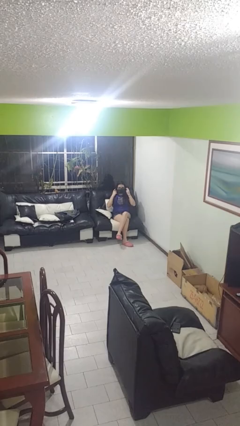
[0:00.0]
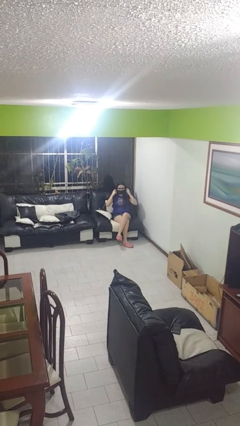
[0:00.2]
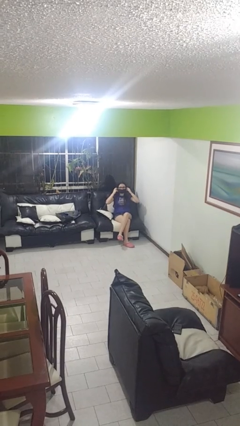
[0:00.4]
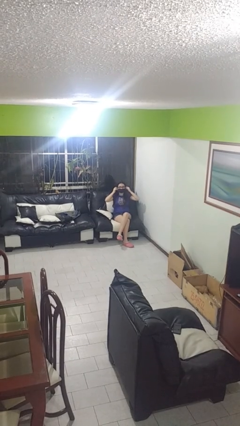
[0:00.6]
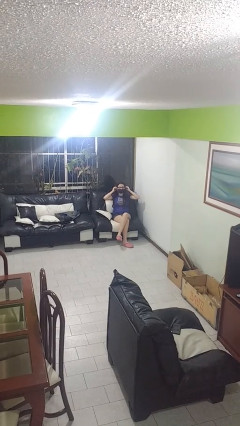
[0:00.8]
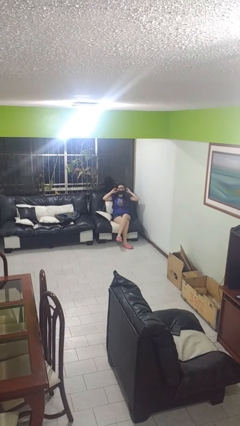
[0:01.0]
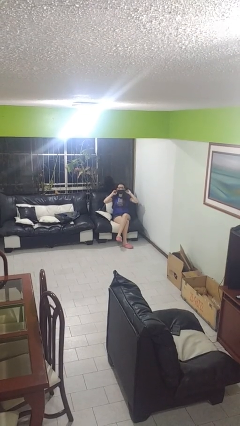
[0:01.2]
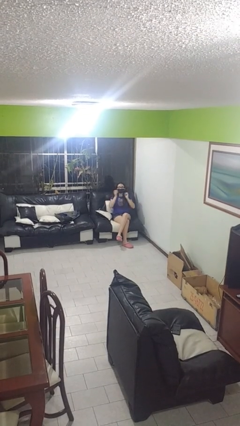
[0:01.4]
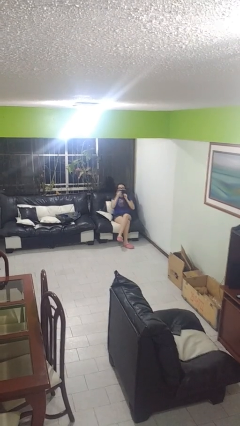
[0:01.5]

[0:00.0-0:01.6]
person puts on facemask

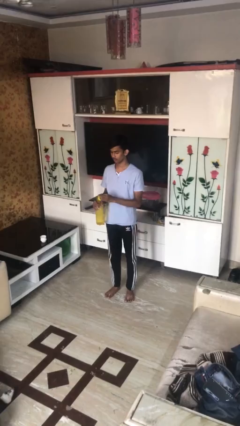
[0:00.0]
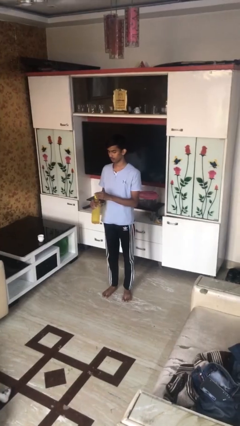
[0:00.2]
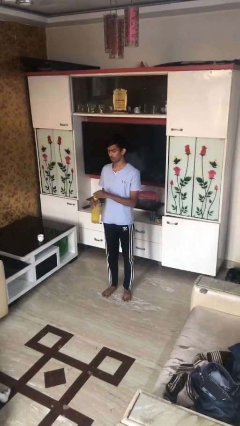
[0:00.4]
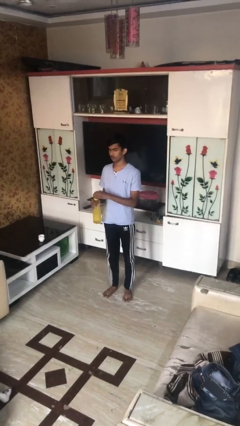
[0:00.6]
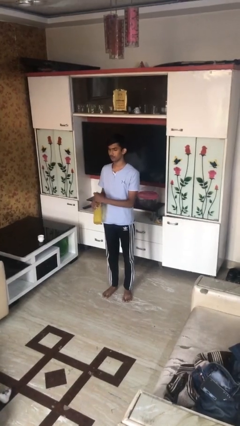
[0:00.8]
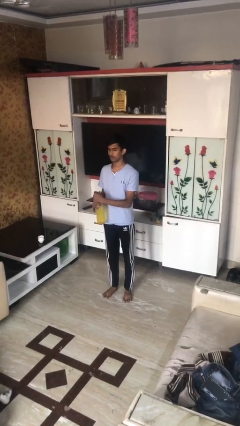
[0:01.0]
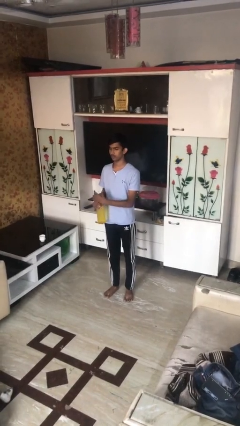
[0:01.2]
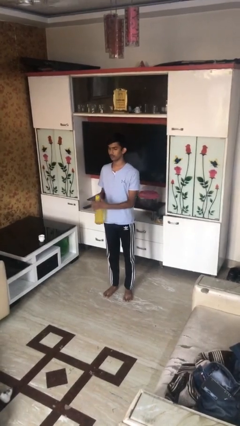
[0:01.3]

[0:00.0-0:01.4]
person screws lid to bottle

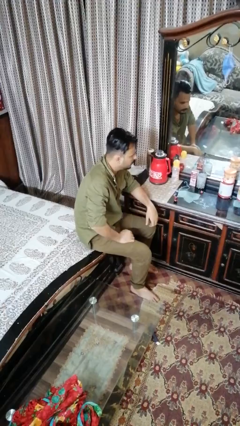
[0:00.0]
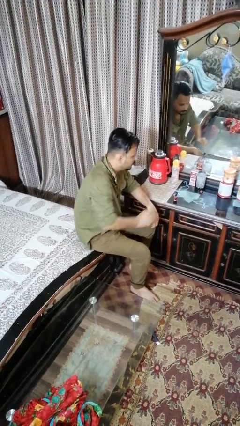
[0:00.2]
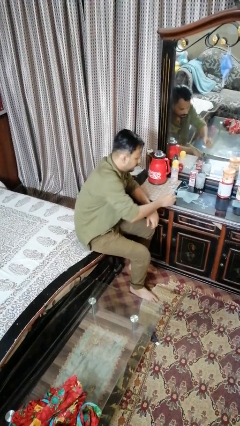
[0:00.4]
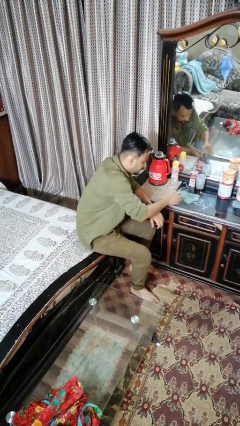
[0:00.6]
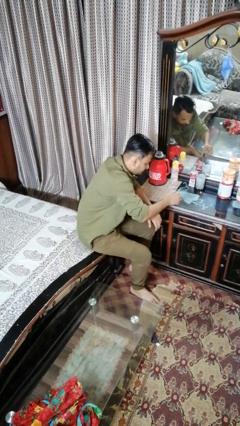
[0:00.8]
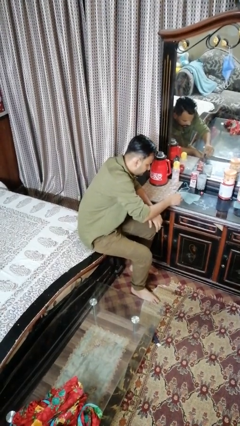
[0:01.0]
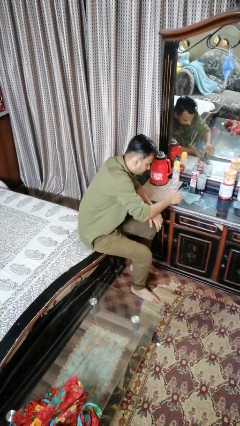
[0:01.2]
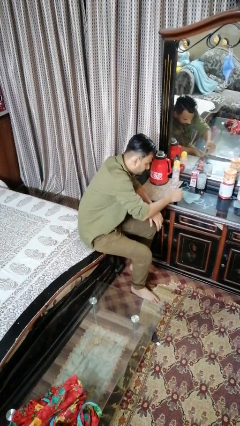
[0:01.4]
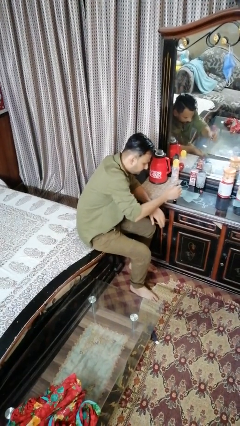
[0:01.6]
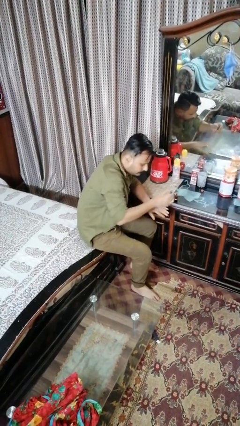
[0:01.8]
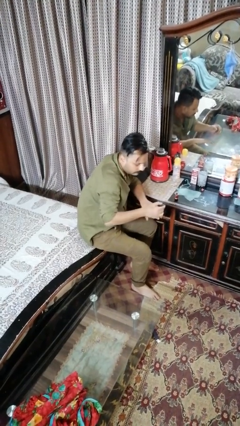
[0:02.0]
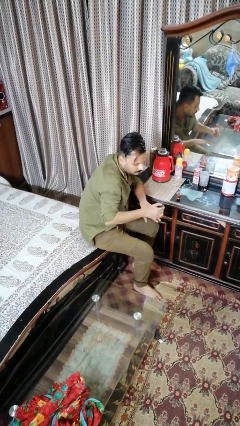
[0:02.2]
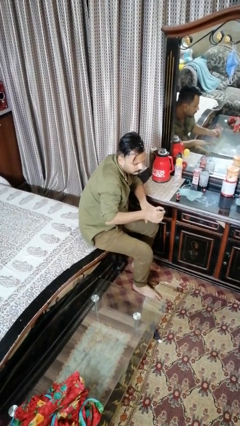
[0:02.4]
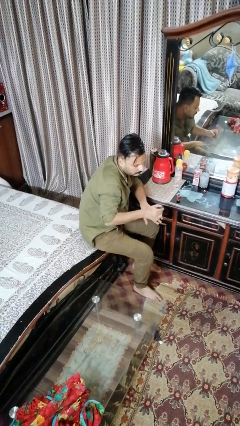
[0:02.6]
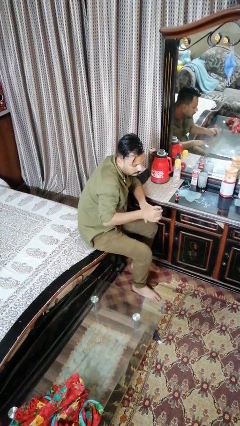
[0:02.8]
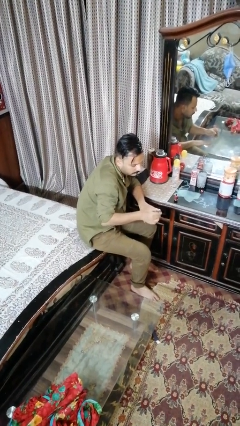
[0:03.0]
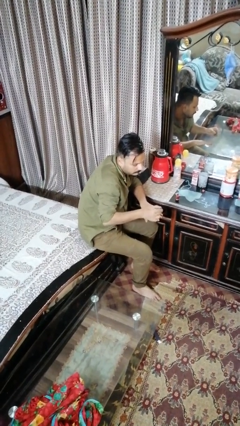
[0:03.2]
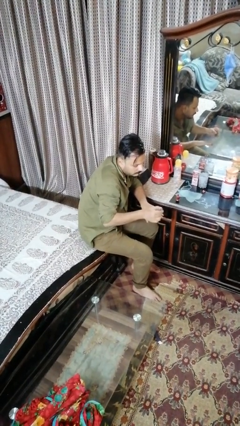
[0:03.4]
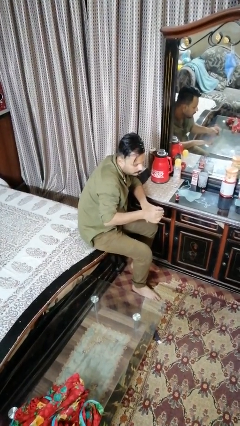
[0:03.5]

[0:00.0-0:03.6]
person paints fingernails

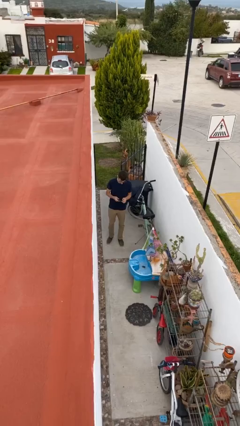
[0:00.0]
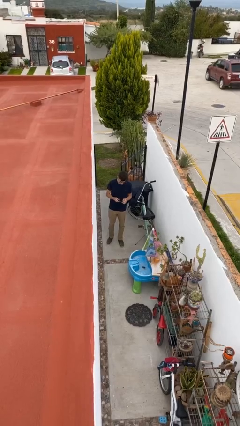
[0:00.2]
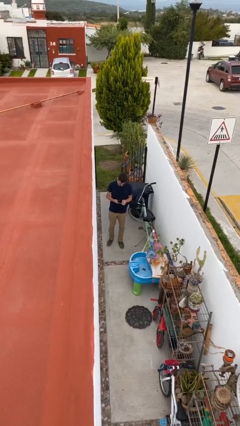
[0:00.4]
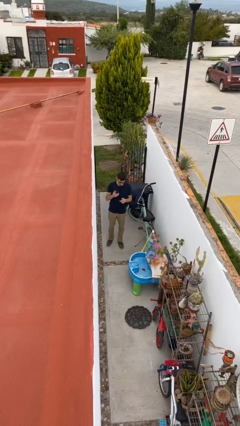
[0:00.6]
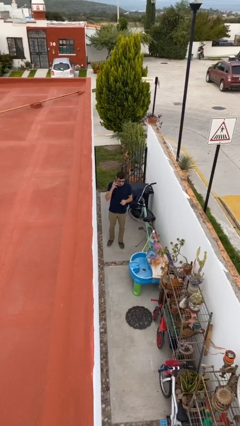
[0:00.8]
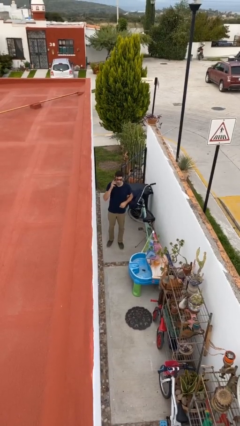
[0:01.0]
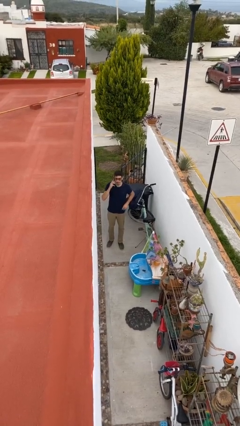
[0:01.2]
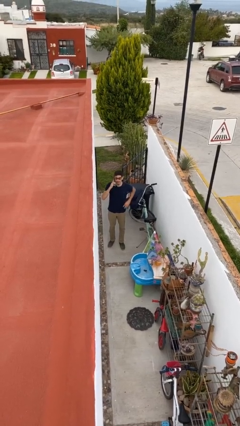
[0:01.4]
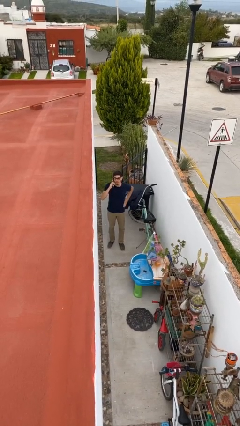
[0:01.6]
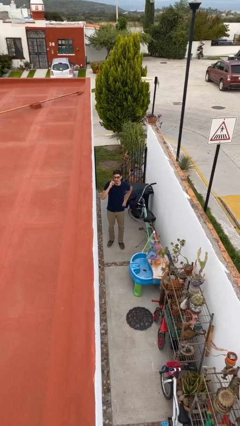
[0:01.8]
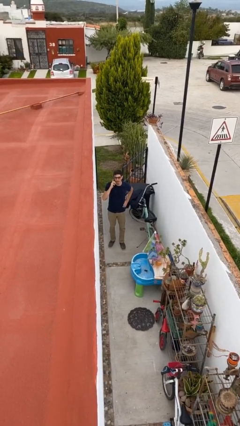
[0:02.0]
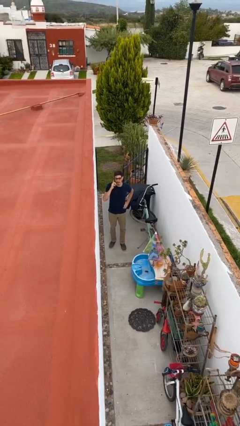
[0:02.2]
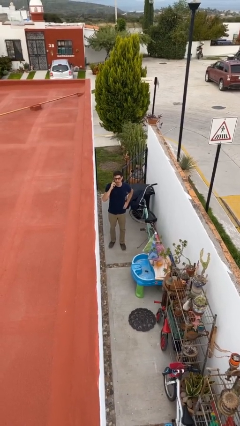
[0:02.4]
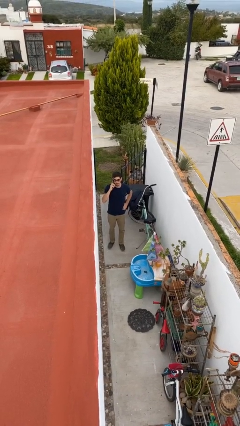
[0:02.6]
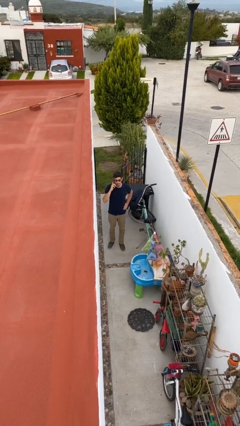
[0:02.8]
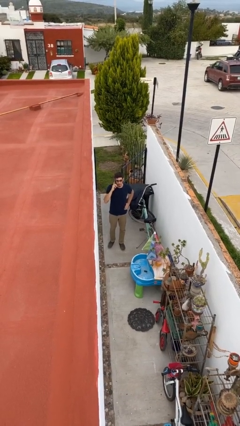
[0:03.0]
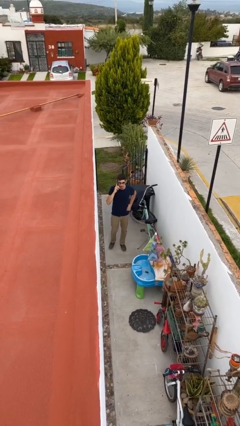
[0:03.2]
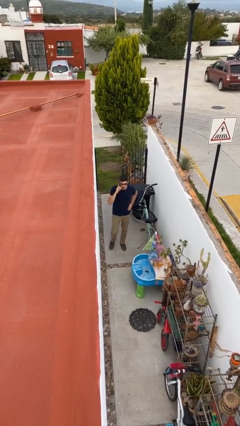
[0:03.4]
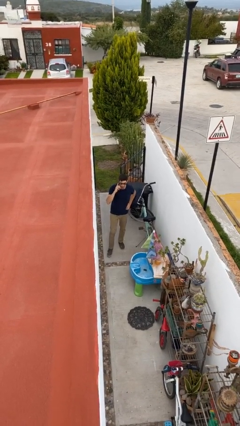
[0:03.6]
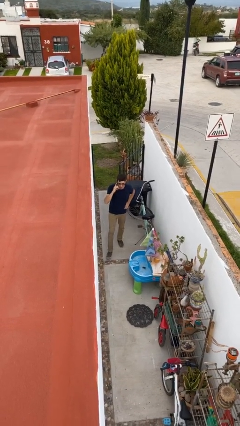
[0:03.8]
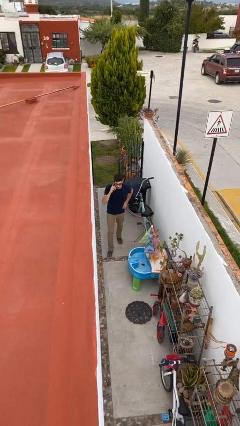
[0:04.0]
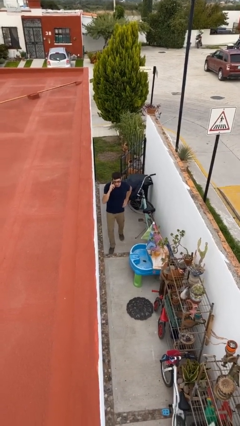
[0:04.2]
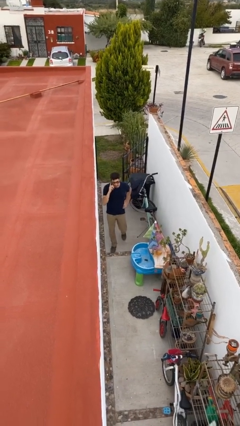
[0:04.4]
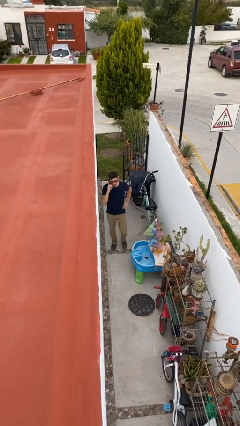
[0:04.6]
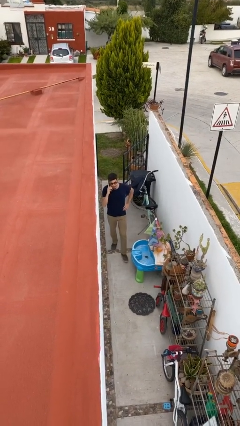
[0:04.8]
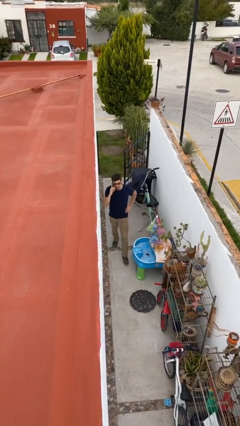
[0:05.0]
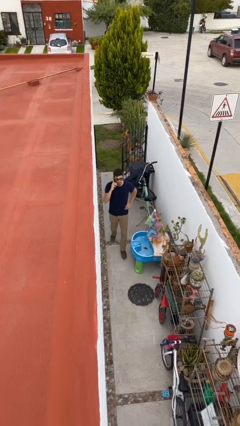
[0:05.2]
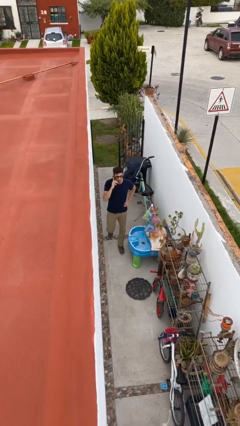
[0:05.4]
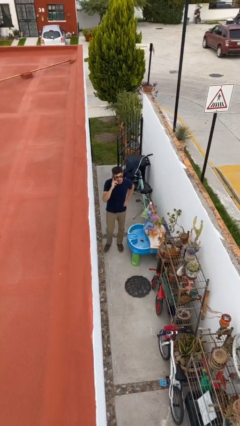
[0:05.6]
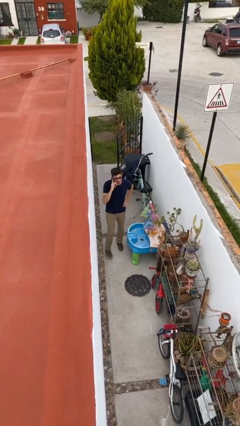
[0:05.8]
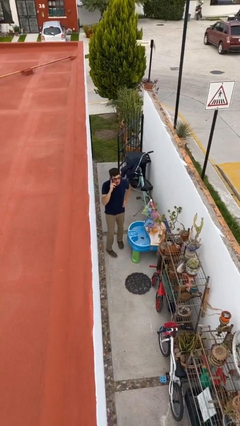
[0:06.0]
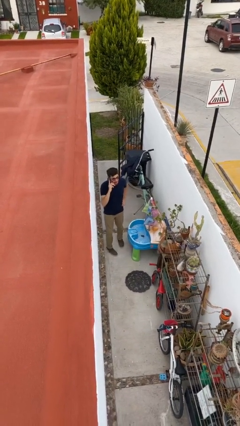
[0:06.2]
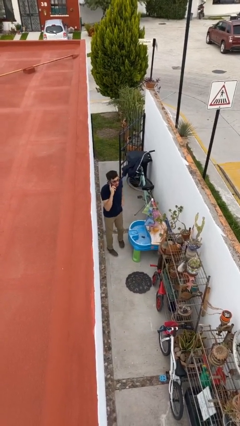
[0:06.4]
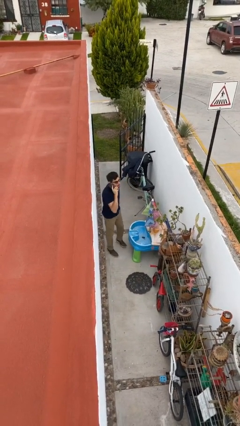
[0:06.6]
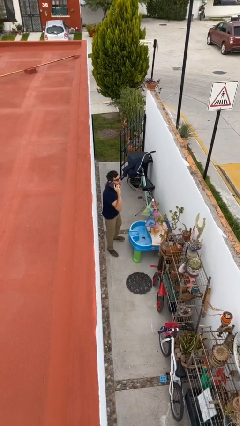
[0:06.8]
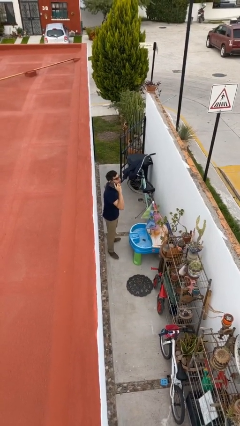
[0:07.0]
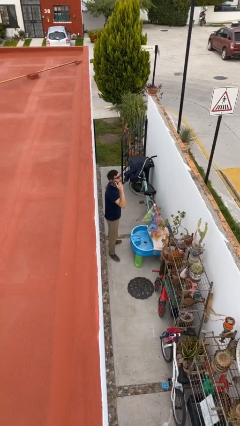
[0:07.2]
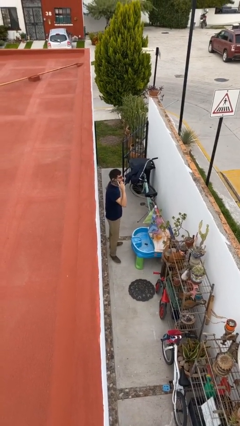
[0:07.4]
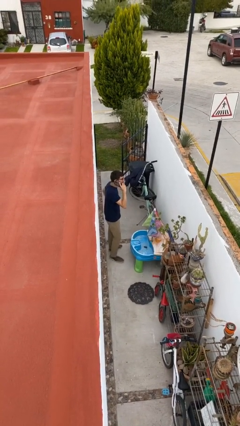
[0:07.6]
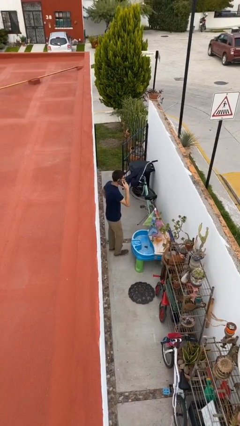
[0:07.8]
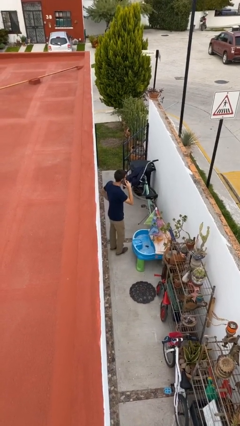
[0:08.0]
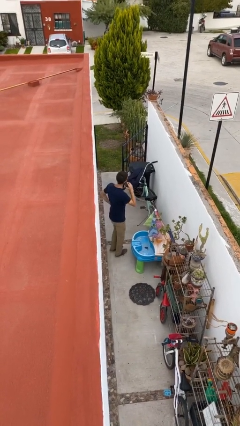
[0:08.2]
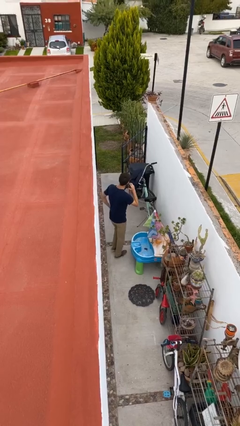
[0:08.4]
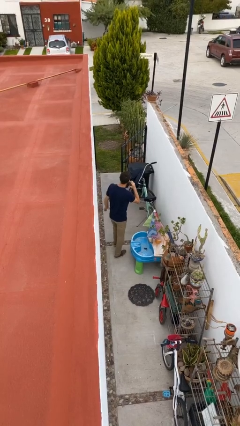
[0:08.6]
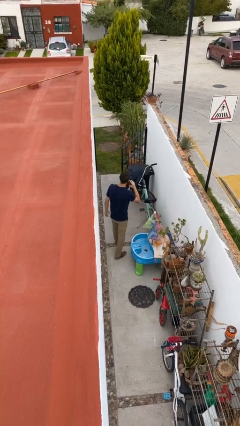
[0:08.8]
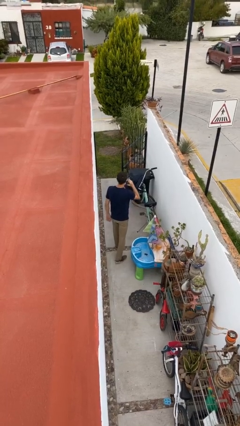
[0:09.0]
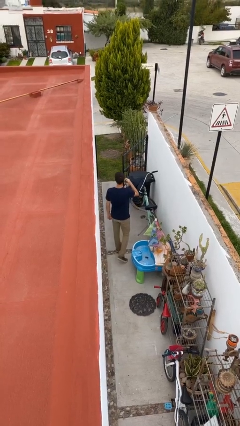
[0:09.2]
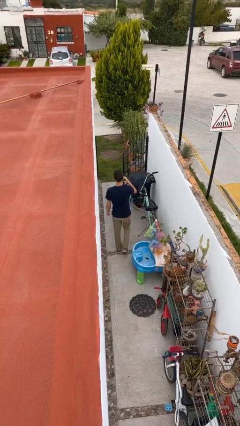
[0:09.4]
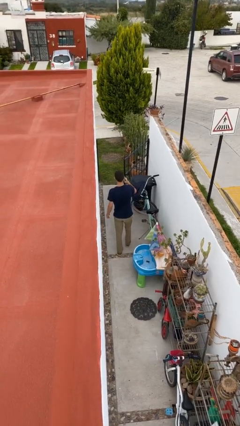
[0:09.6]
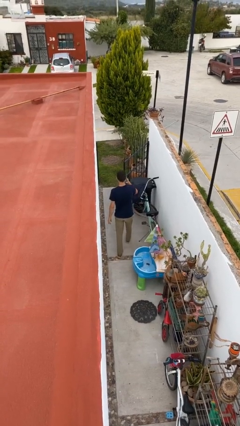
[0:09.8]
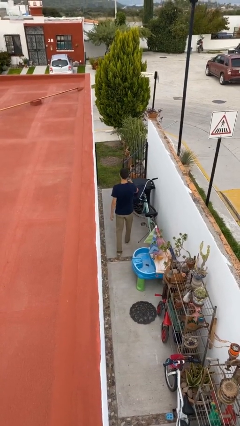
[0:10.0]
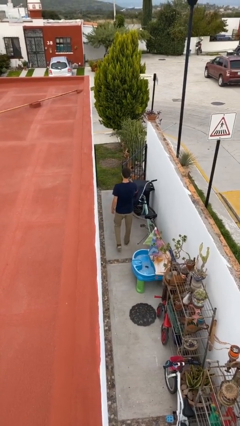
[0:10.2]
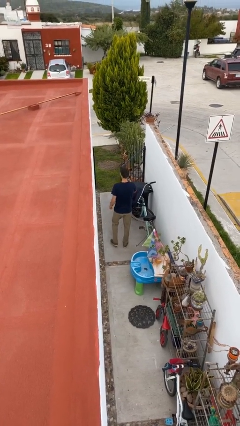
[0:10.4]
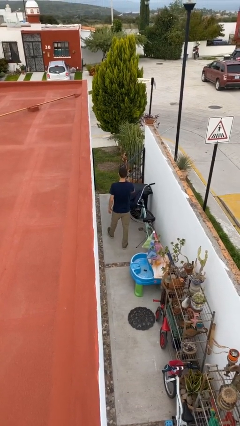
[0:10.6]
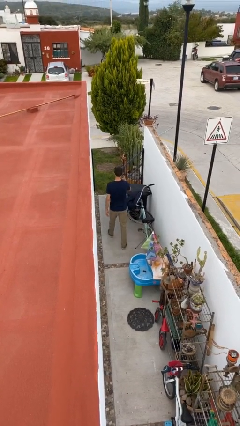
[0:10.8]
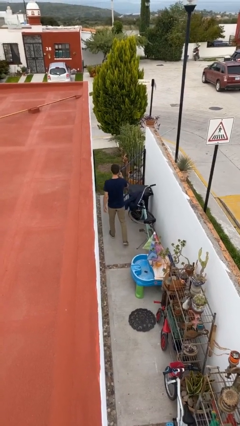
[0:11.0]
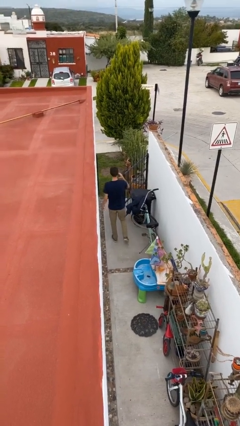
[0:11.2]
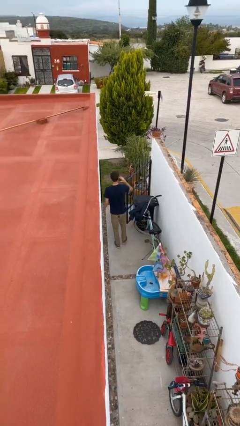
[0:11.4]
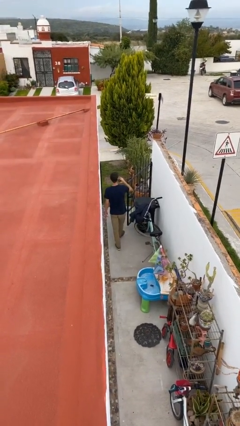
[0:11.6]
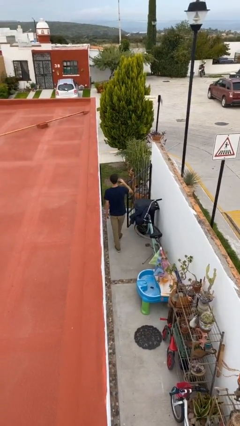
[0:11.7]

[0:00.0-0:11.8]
person talks on phone
